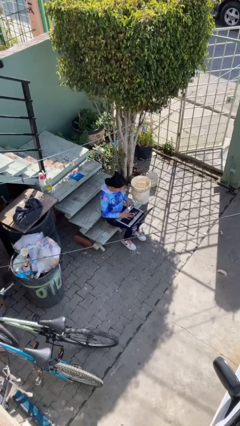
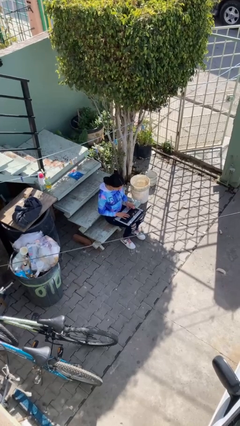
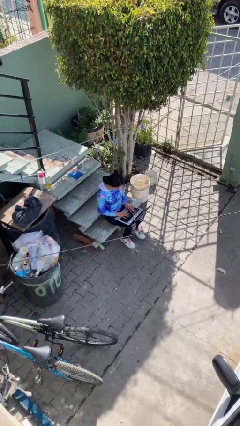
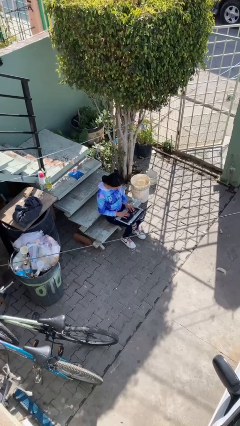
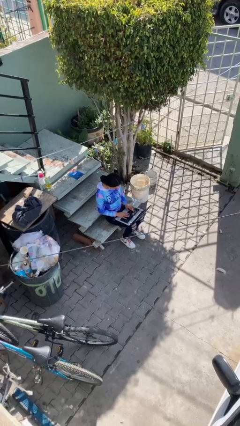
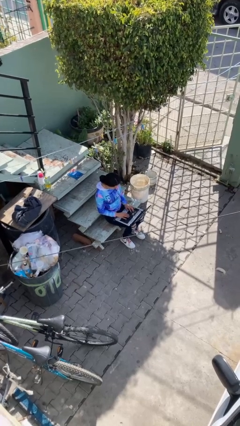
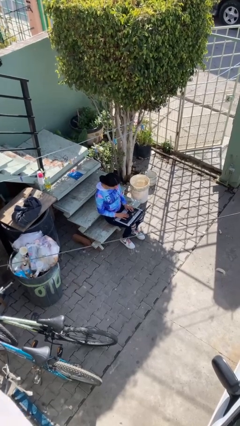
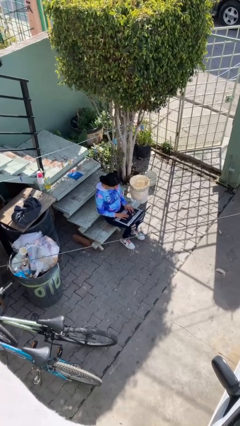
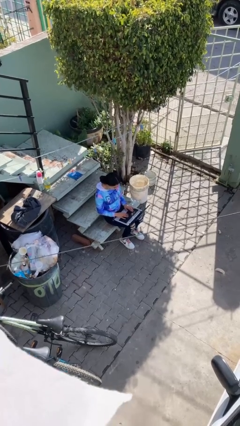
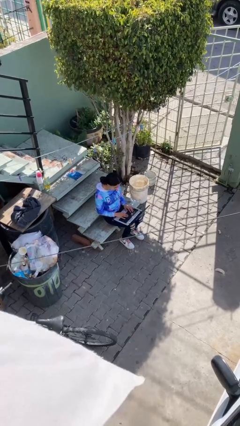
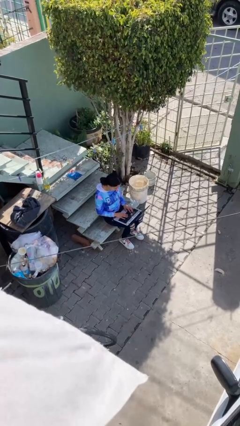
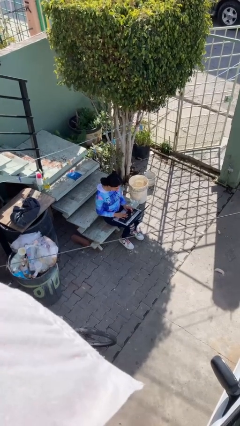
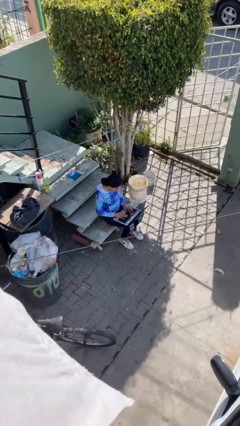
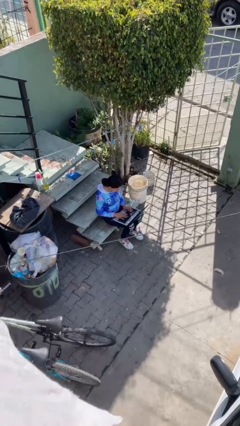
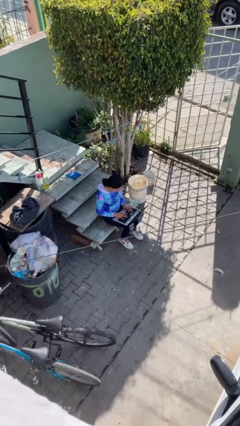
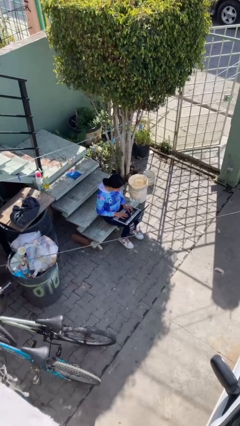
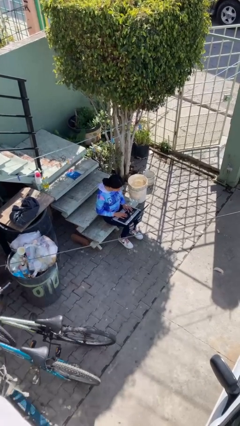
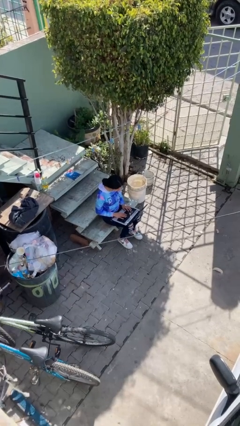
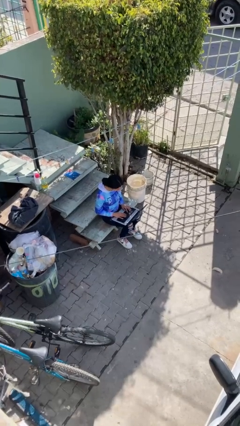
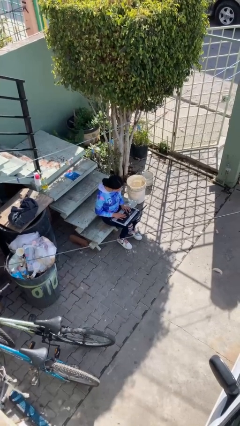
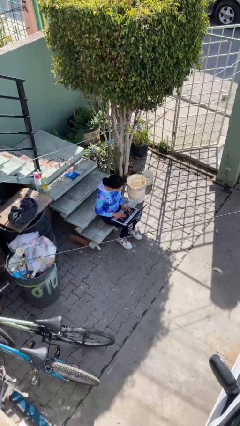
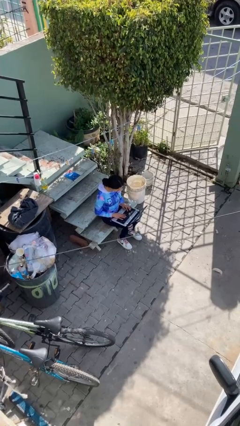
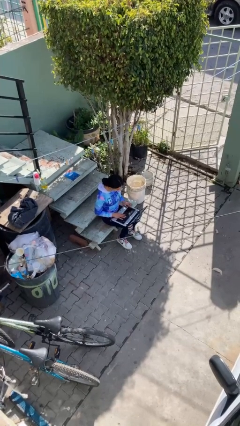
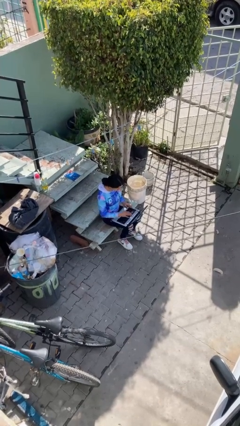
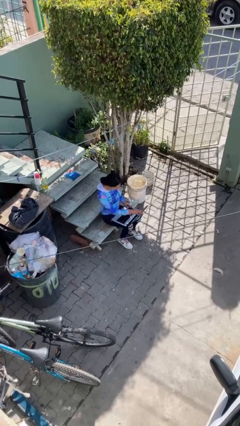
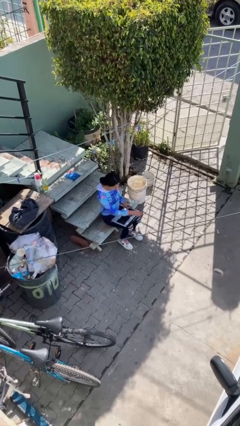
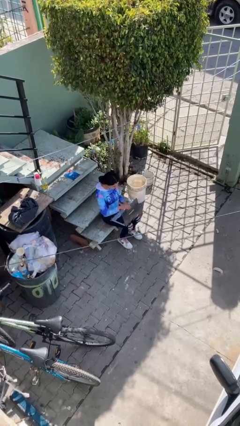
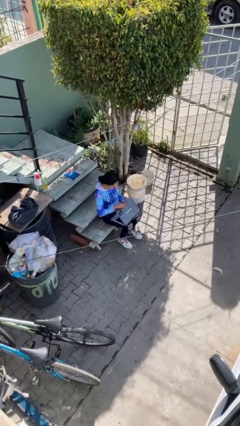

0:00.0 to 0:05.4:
person interacts with laptop

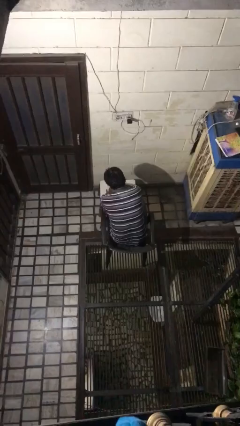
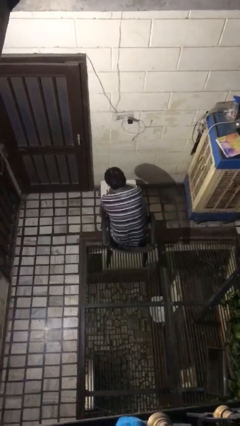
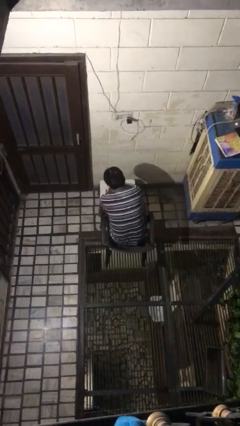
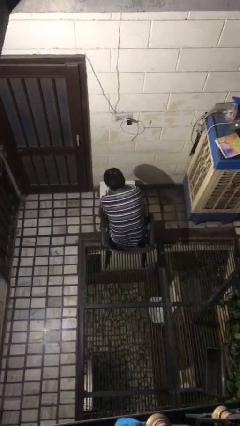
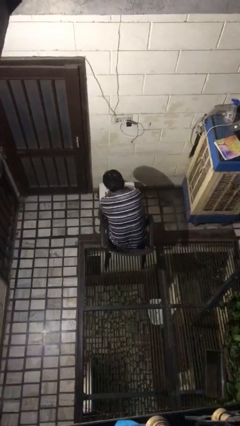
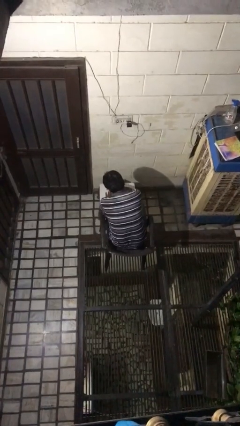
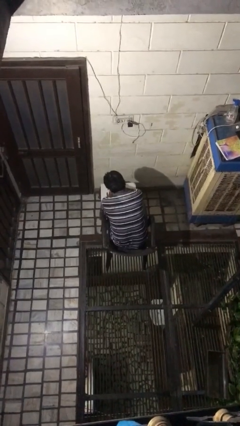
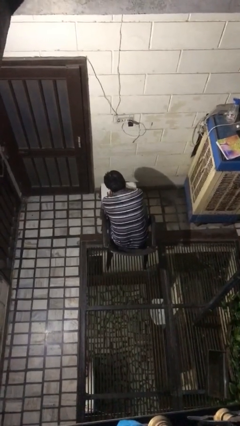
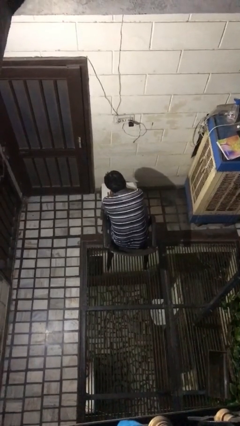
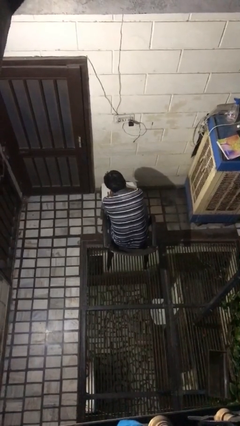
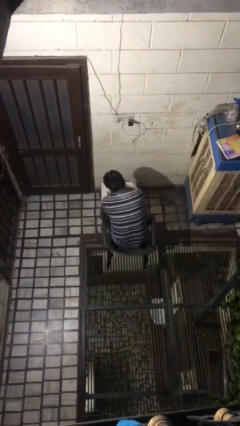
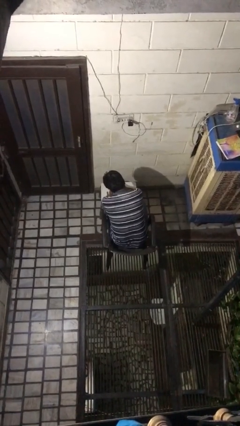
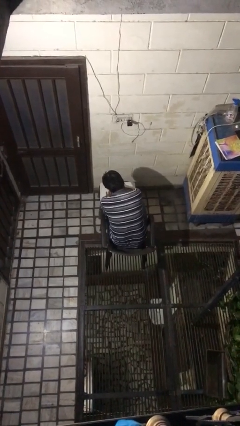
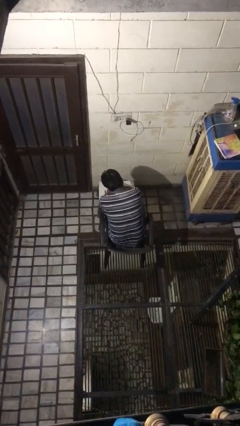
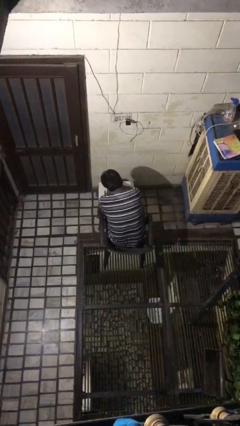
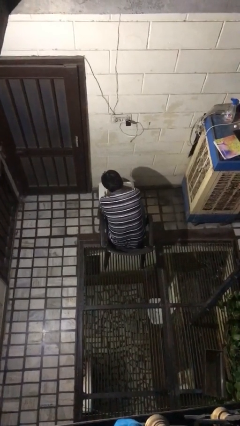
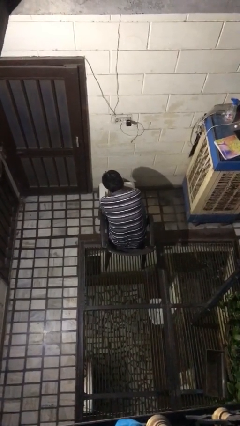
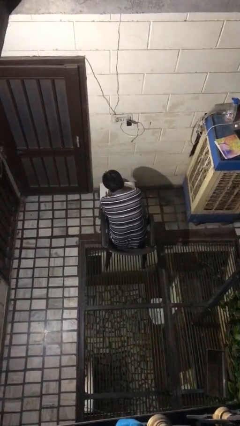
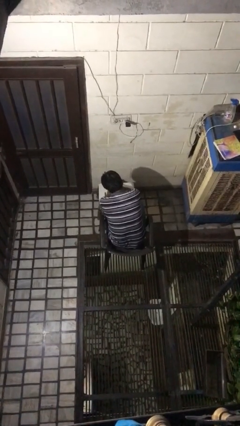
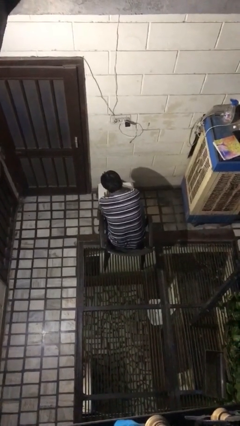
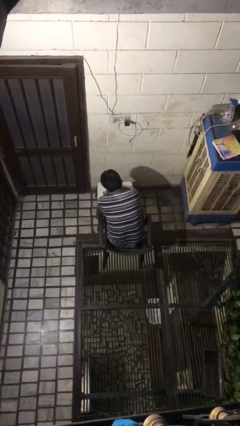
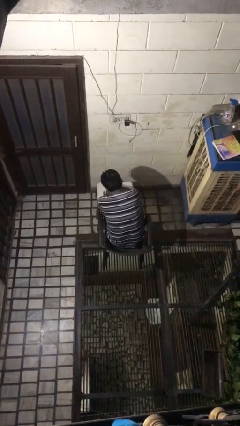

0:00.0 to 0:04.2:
person paints fingernails

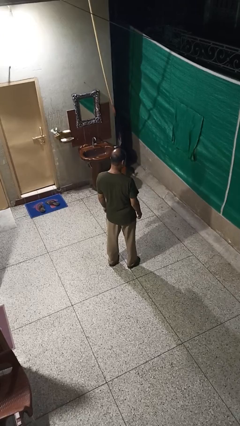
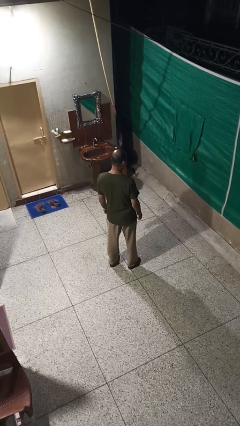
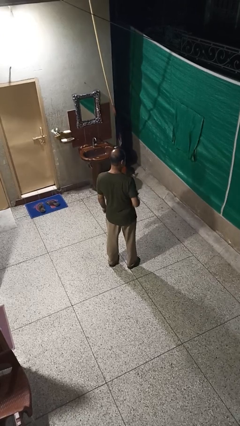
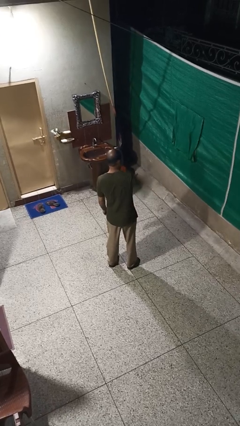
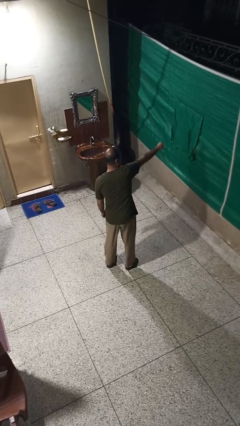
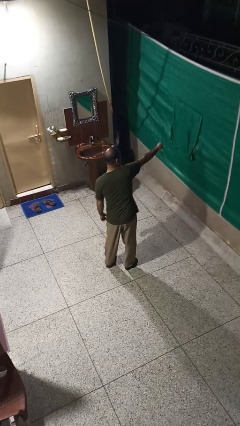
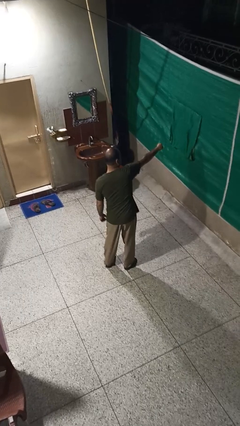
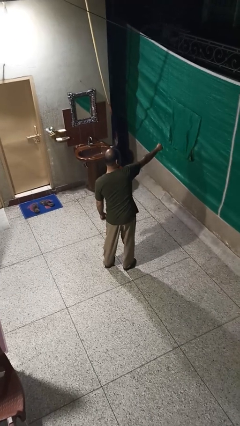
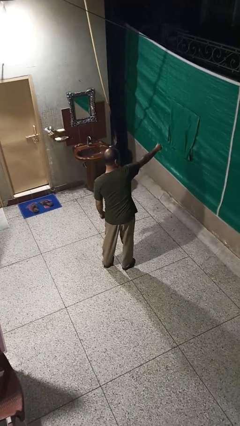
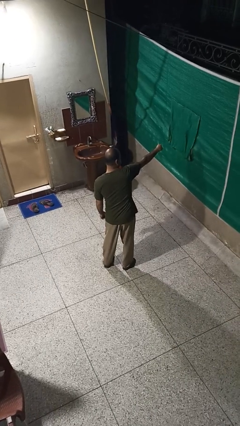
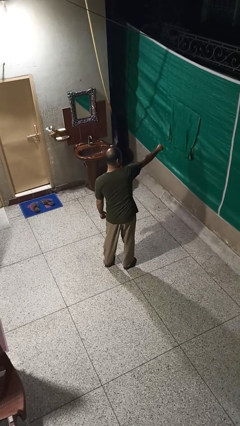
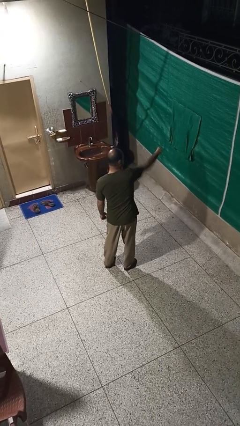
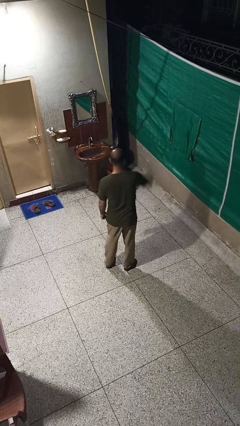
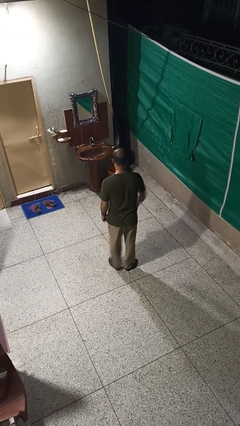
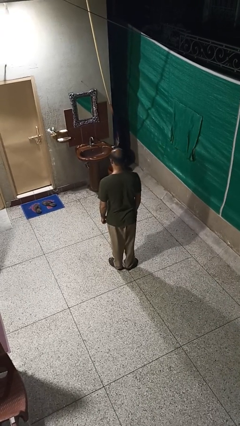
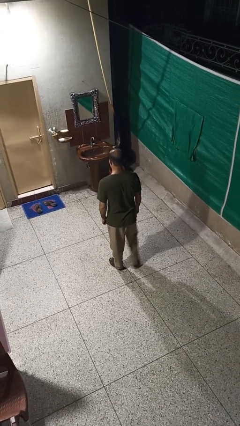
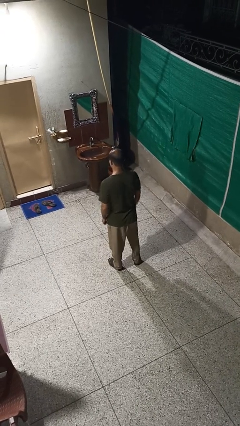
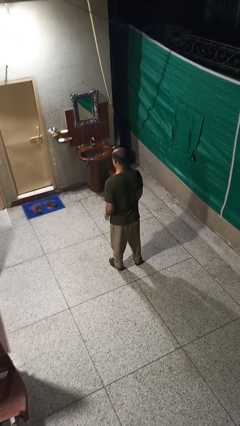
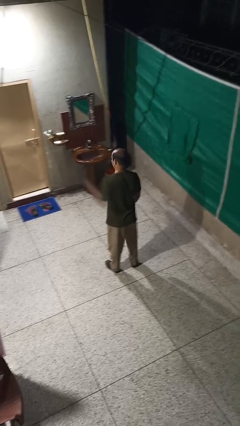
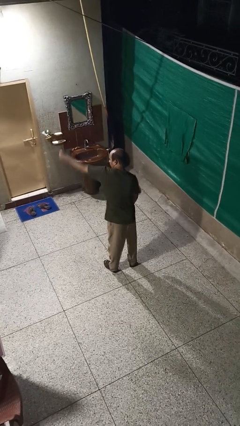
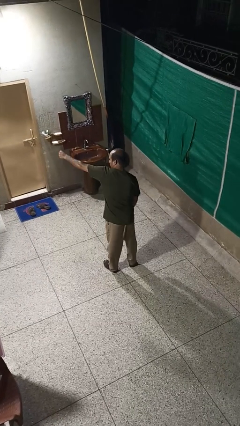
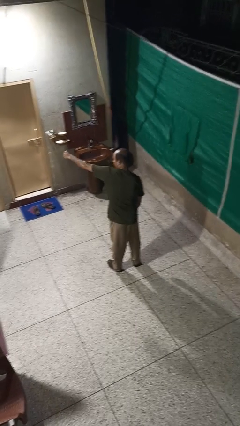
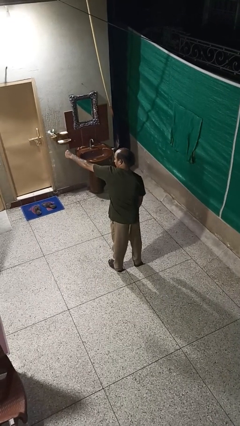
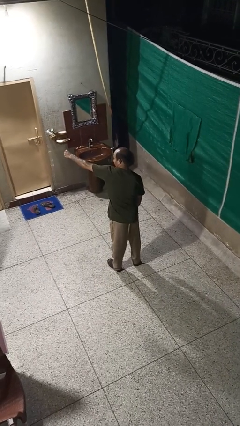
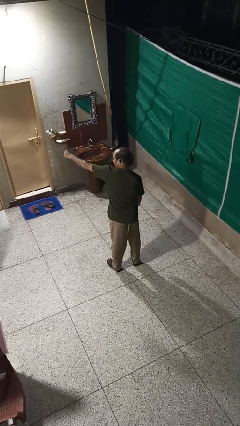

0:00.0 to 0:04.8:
person punches

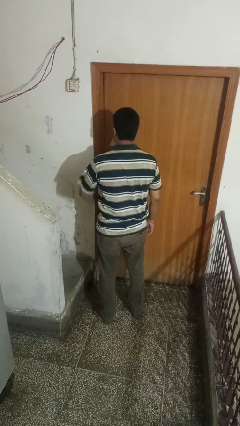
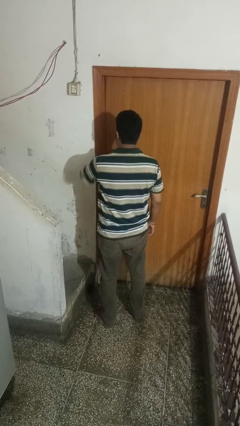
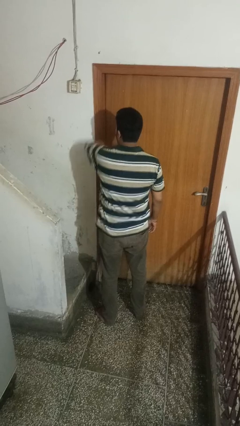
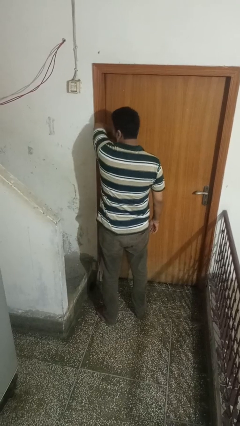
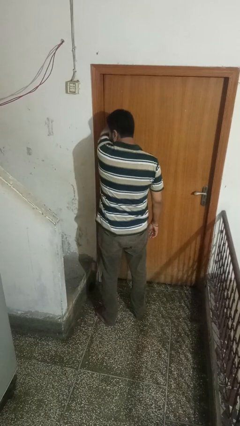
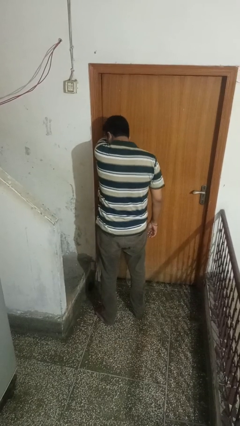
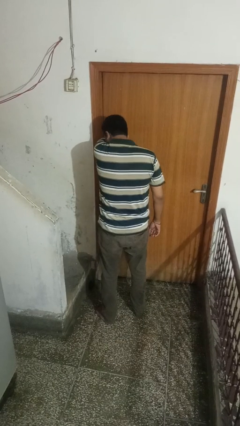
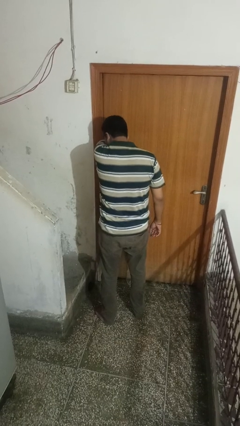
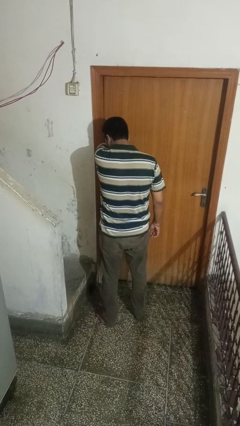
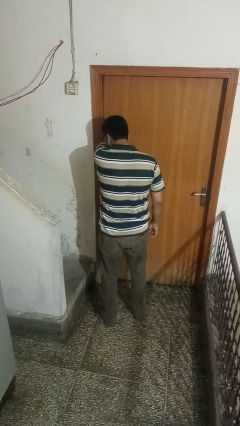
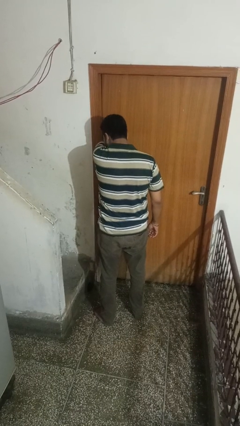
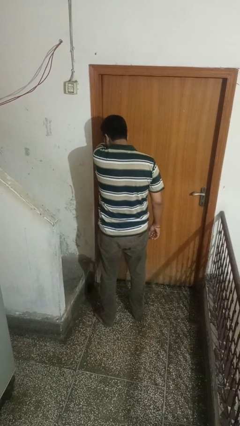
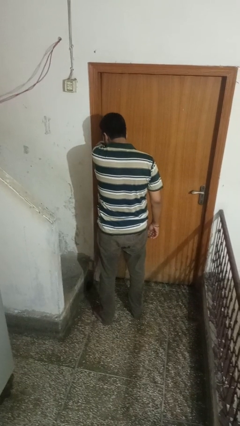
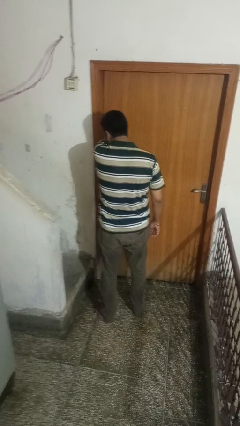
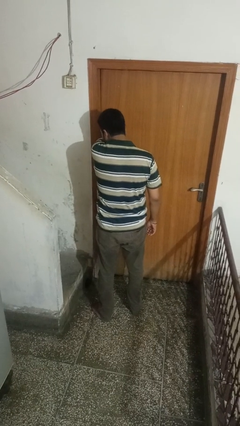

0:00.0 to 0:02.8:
person sneezes into arm

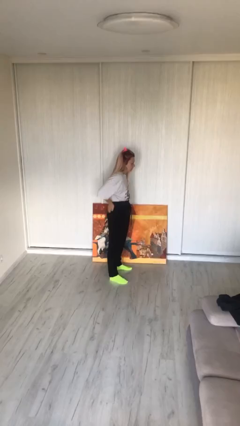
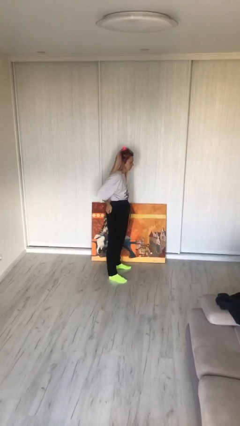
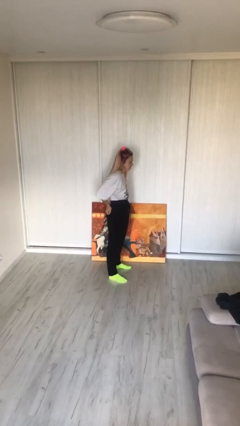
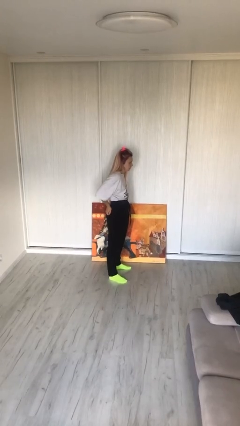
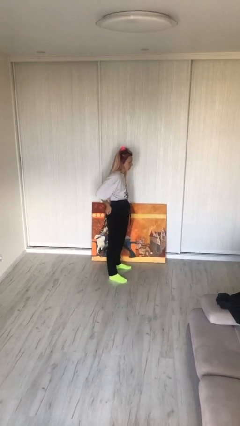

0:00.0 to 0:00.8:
person puts hands in back pockets

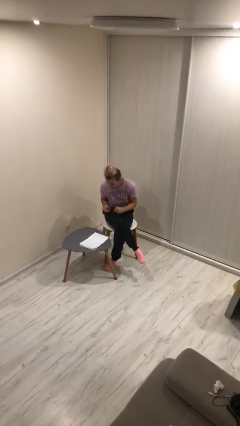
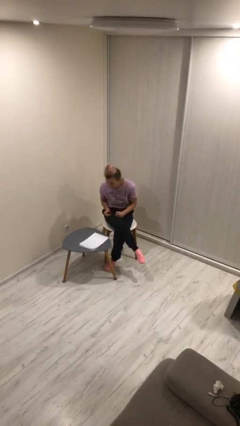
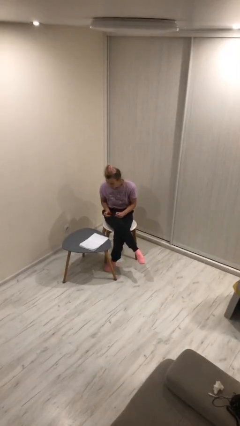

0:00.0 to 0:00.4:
person takes off glasses
